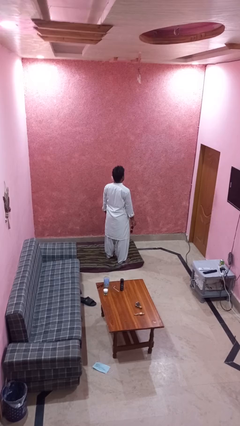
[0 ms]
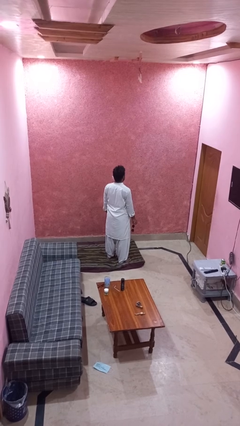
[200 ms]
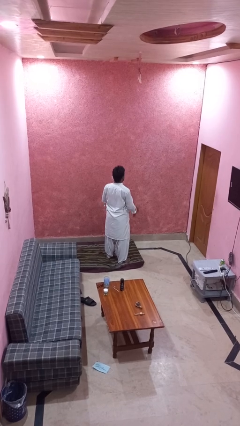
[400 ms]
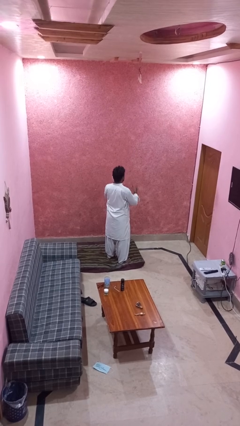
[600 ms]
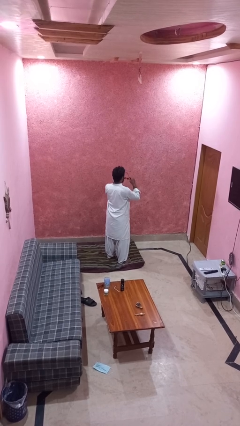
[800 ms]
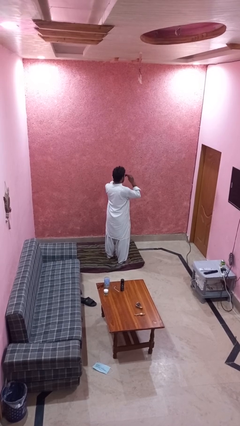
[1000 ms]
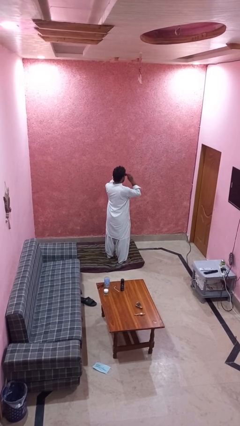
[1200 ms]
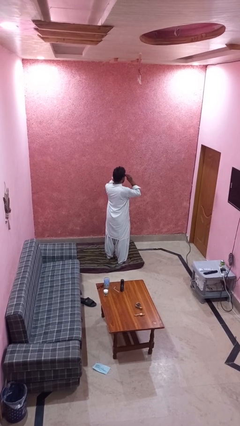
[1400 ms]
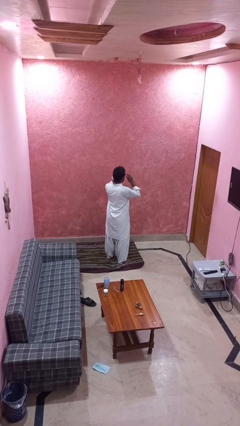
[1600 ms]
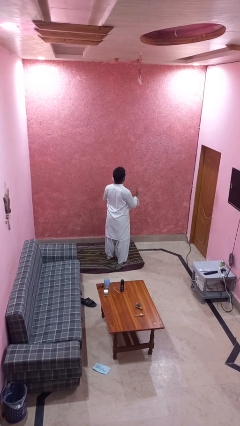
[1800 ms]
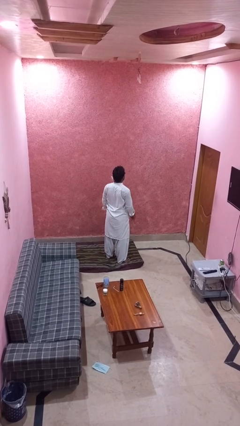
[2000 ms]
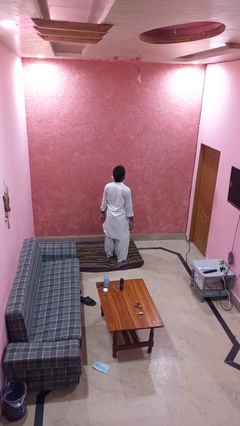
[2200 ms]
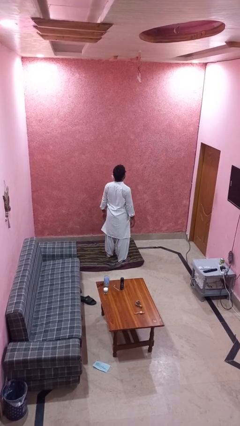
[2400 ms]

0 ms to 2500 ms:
person puts on sunglasses

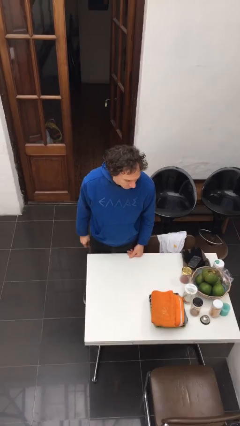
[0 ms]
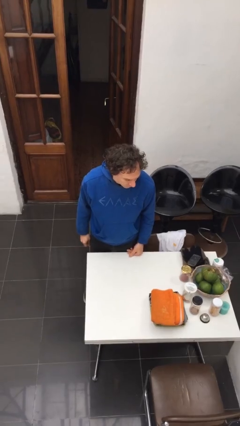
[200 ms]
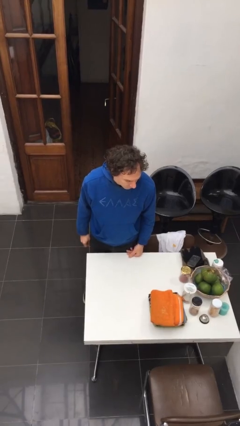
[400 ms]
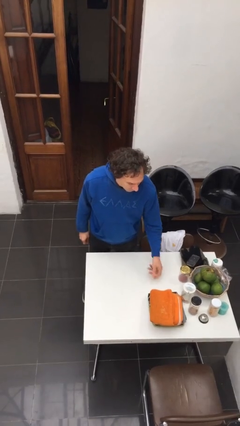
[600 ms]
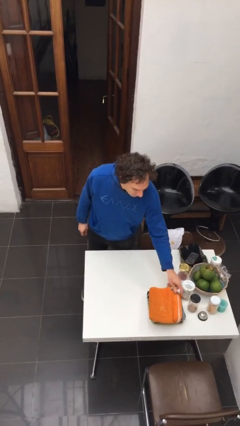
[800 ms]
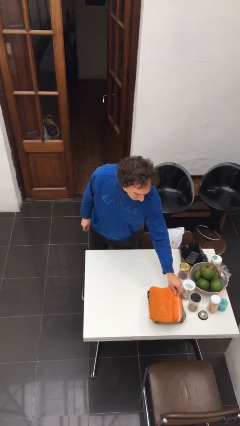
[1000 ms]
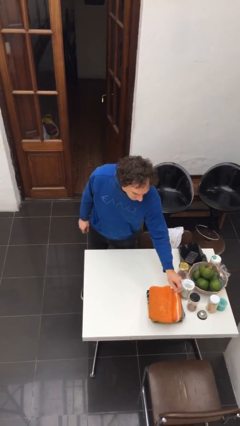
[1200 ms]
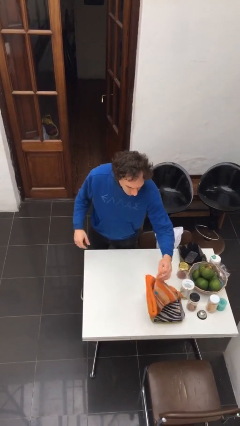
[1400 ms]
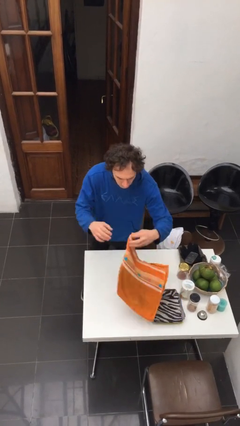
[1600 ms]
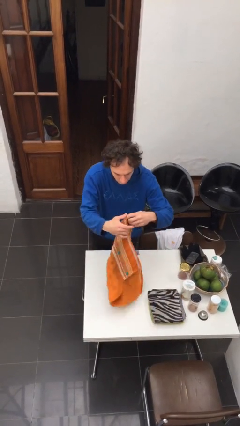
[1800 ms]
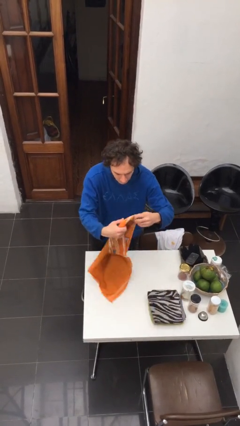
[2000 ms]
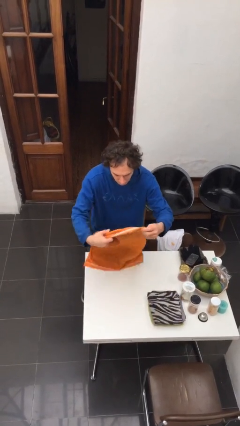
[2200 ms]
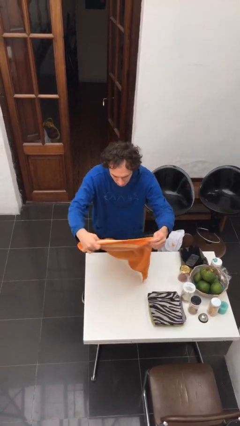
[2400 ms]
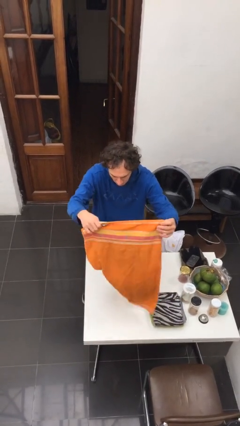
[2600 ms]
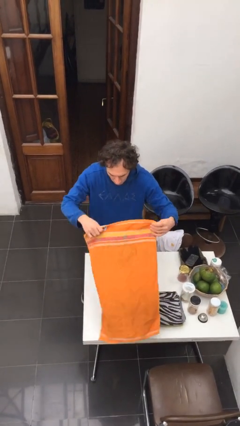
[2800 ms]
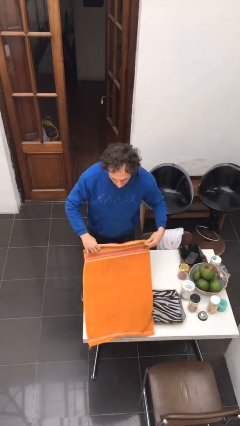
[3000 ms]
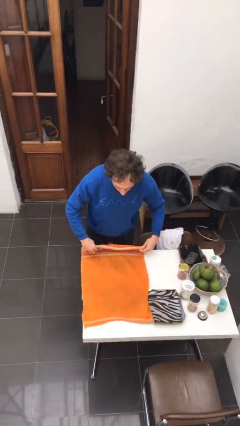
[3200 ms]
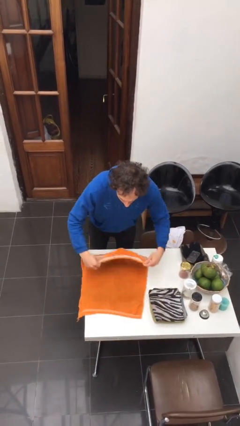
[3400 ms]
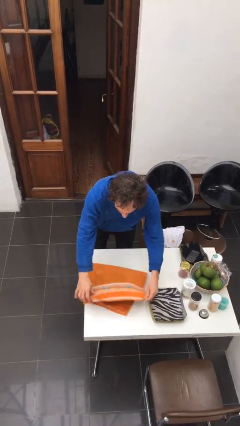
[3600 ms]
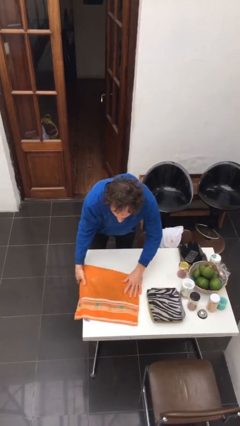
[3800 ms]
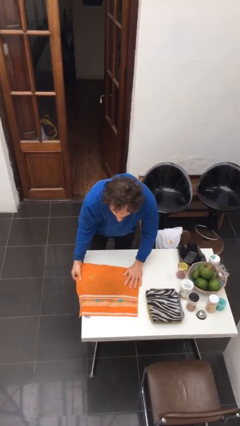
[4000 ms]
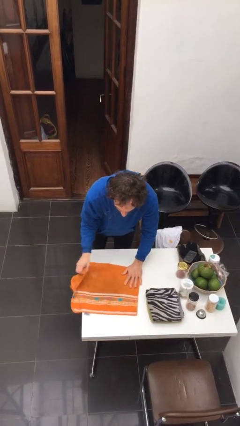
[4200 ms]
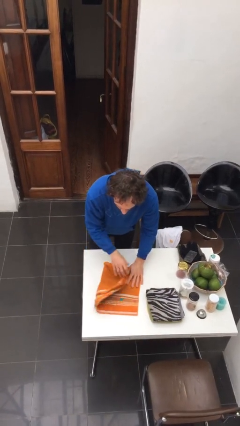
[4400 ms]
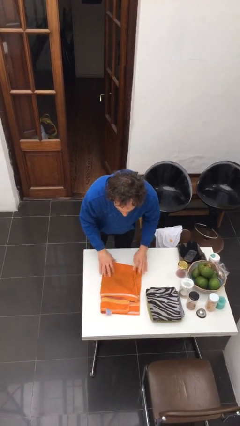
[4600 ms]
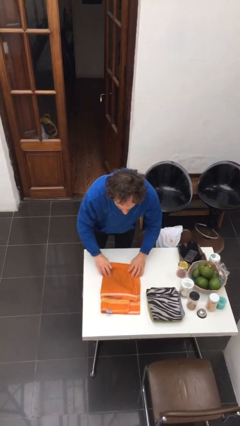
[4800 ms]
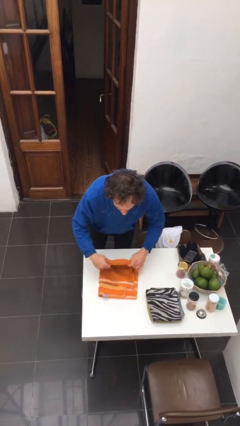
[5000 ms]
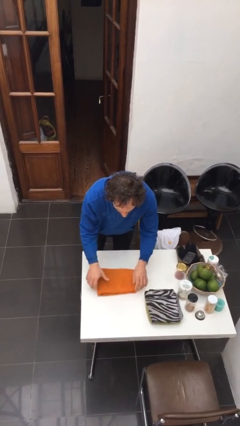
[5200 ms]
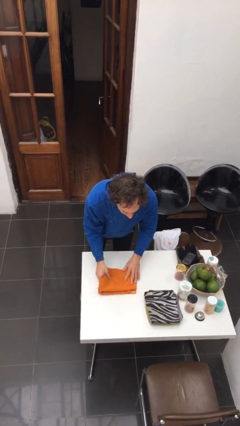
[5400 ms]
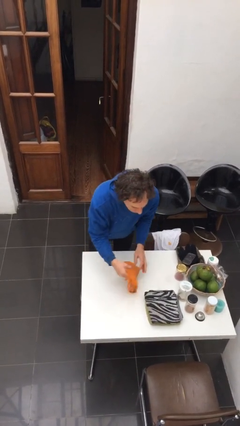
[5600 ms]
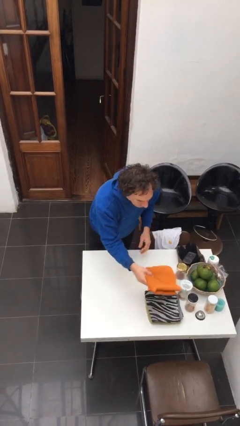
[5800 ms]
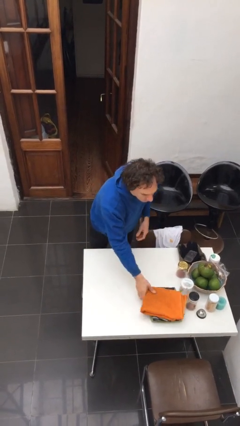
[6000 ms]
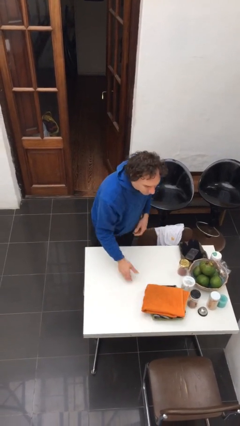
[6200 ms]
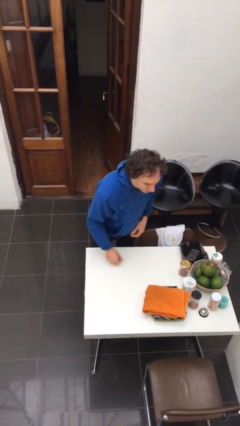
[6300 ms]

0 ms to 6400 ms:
person folds towel

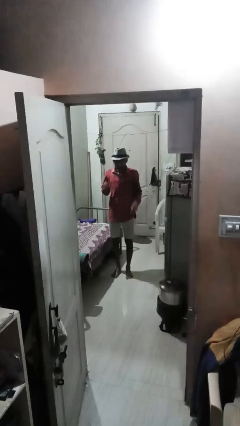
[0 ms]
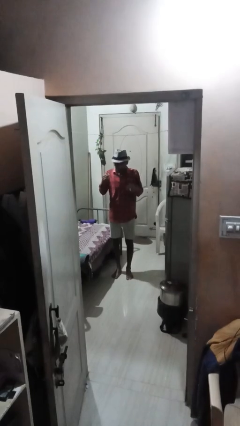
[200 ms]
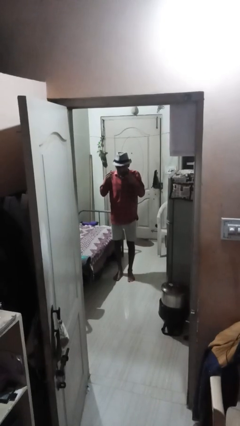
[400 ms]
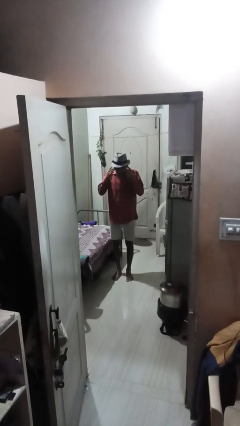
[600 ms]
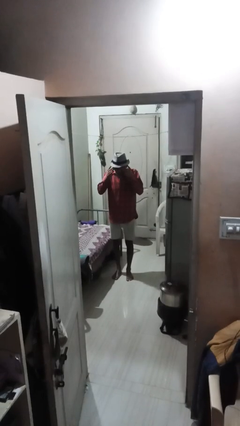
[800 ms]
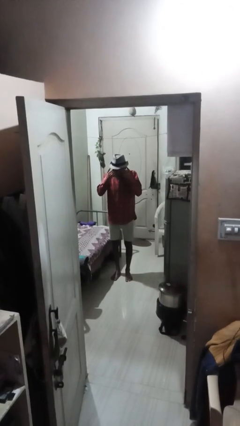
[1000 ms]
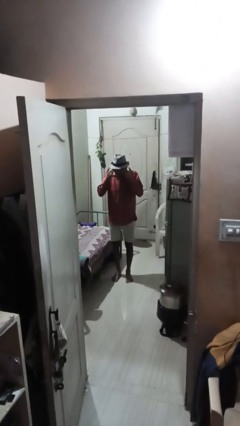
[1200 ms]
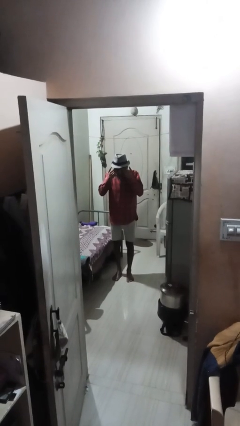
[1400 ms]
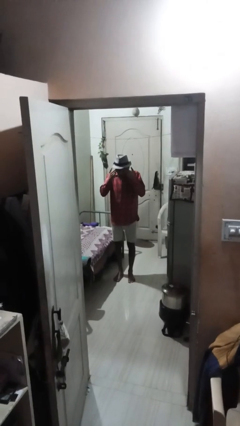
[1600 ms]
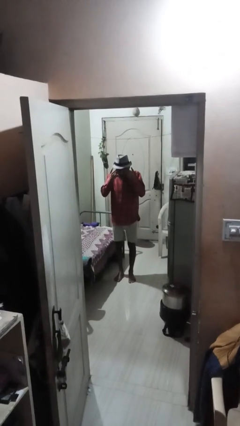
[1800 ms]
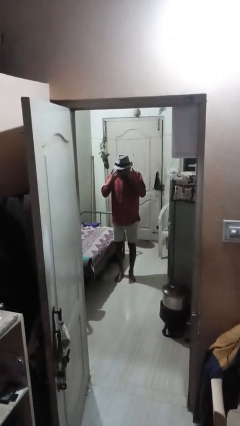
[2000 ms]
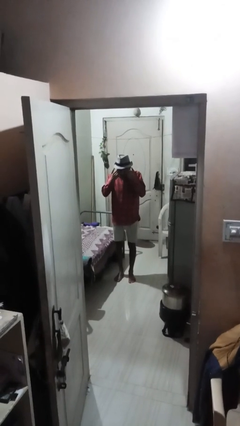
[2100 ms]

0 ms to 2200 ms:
person rubs eyes

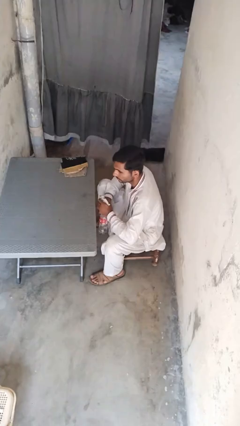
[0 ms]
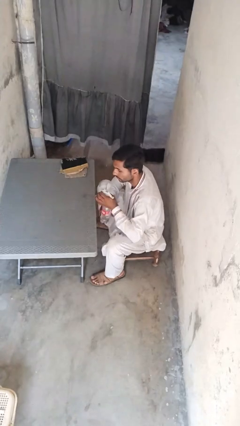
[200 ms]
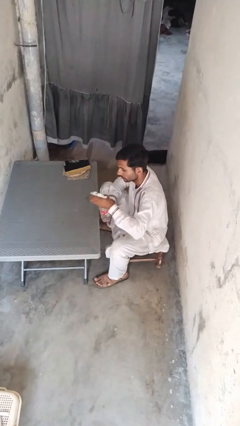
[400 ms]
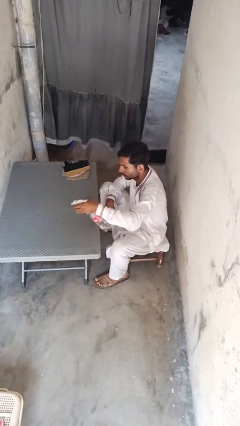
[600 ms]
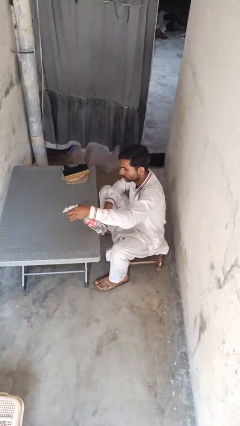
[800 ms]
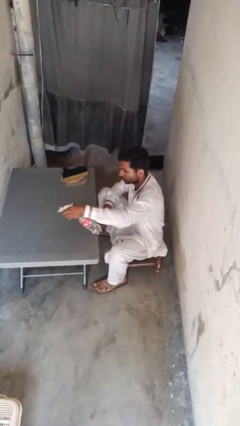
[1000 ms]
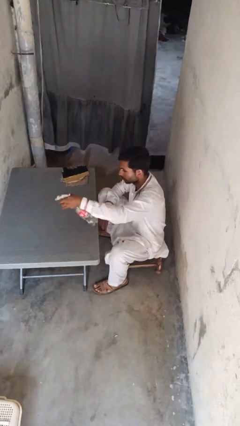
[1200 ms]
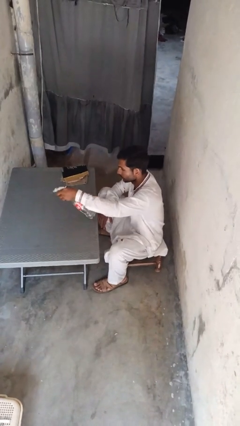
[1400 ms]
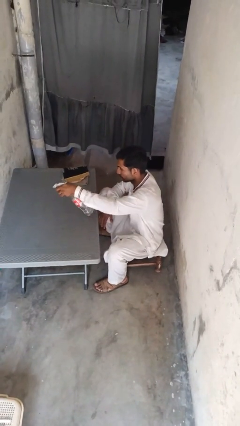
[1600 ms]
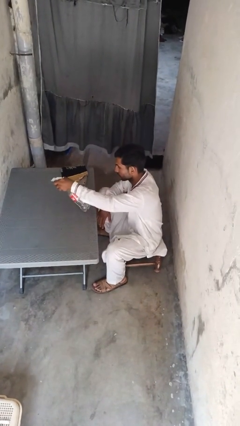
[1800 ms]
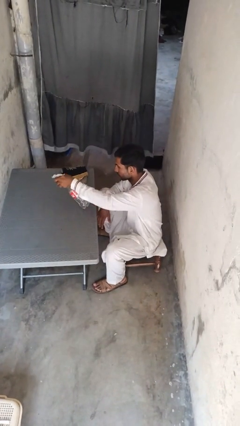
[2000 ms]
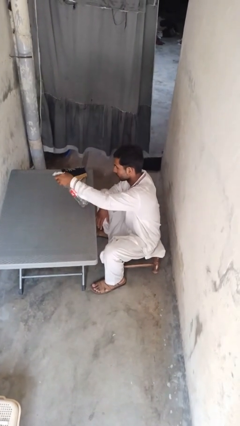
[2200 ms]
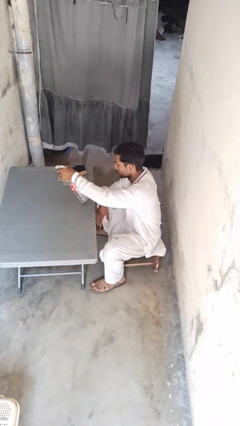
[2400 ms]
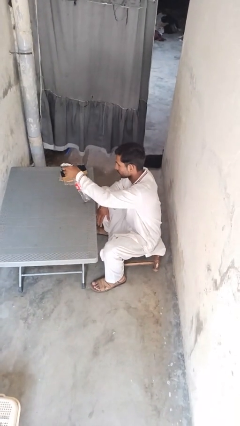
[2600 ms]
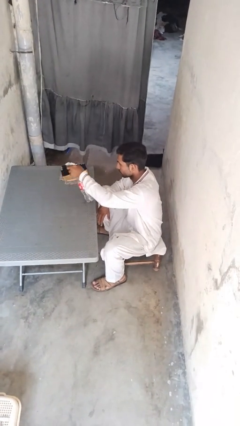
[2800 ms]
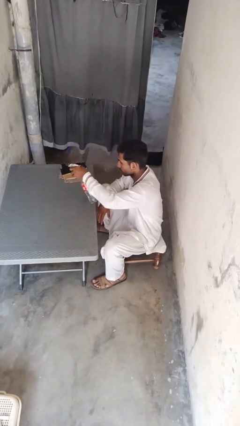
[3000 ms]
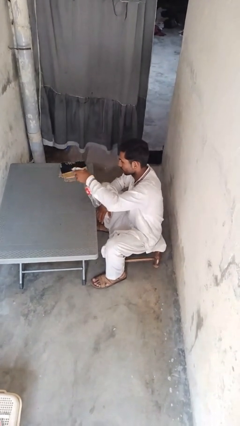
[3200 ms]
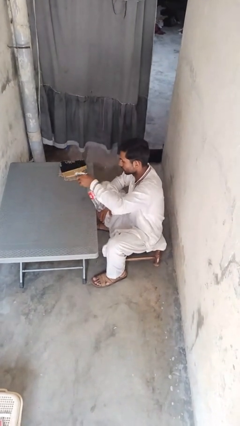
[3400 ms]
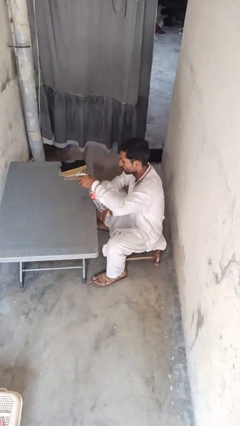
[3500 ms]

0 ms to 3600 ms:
person sprays from bottle

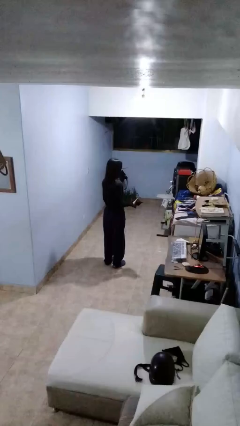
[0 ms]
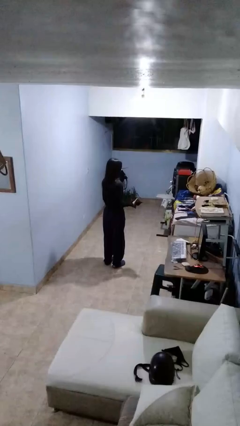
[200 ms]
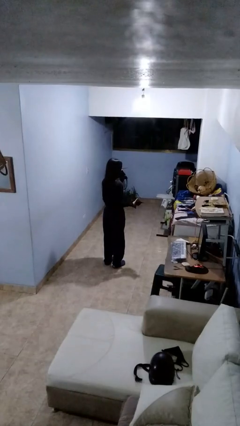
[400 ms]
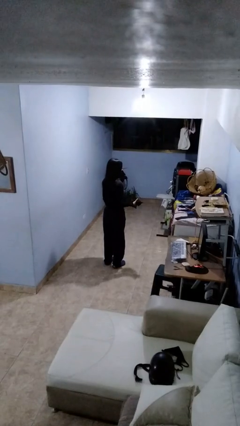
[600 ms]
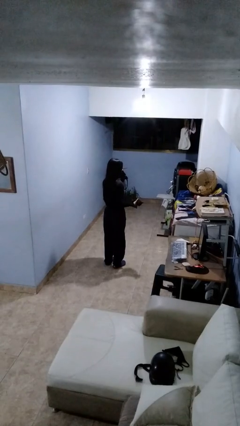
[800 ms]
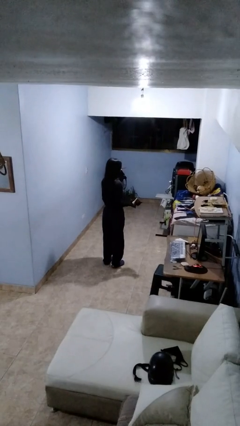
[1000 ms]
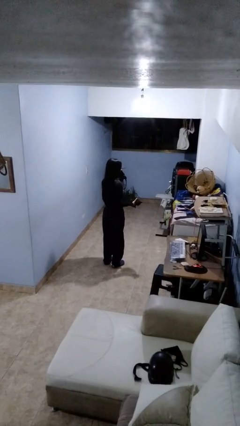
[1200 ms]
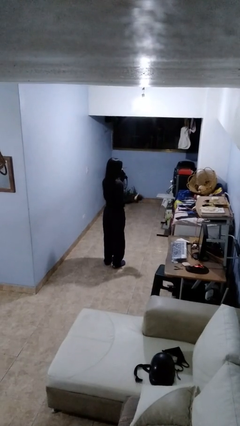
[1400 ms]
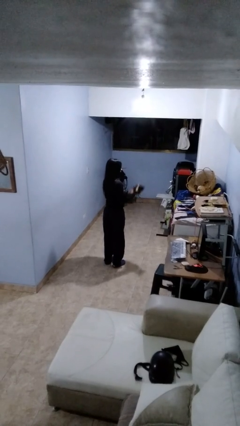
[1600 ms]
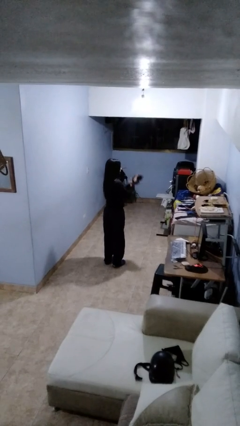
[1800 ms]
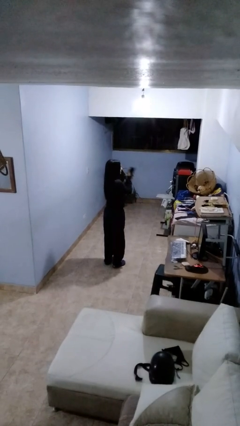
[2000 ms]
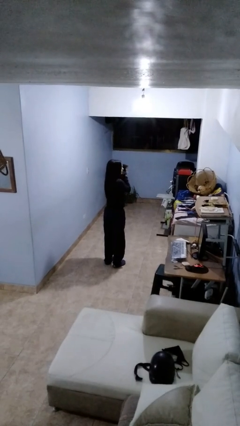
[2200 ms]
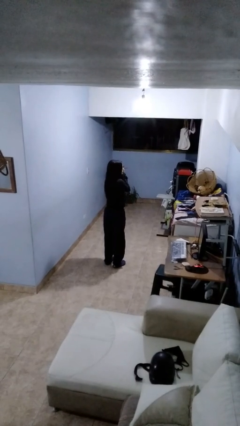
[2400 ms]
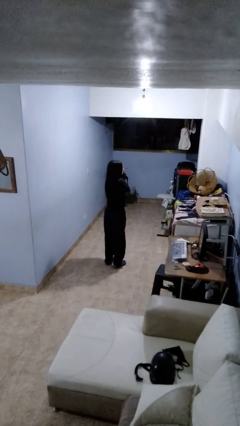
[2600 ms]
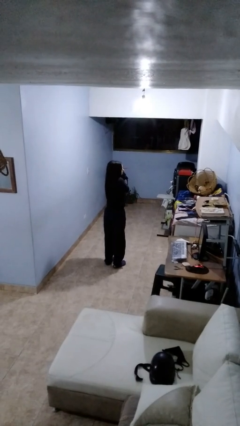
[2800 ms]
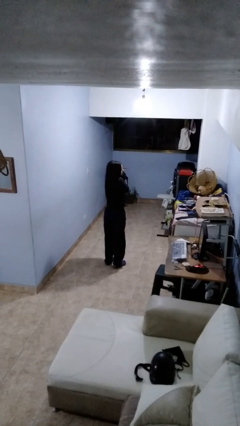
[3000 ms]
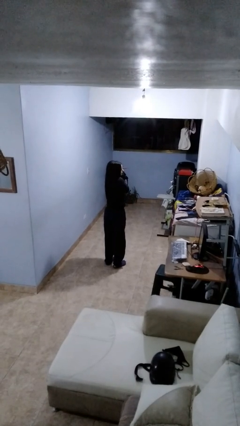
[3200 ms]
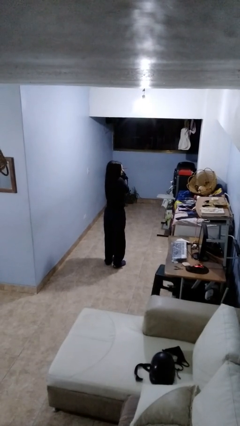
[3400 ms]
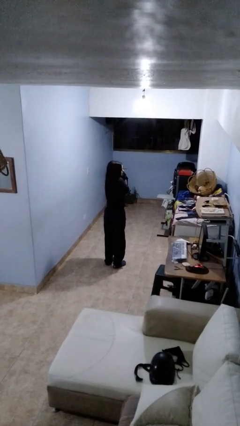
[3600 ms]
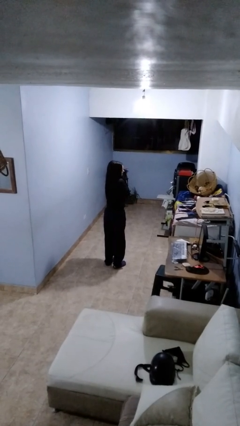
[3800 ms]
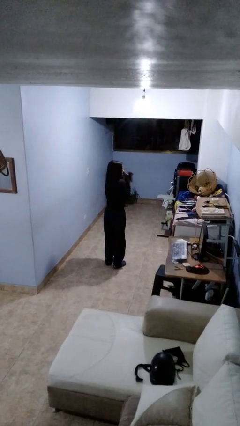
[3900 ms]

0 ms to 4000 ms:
person hugs cat
